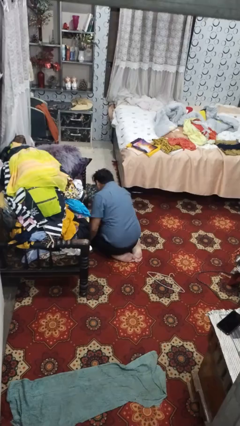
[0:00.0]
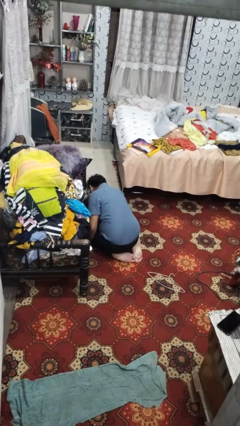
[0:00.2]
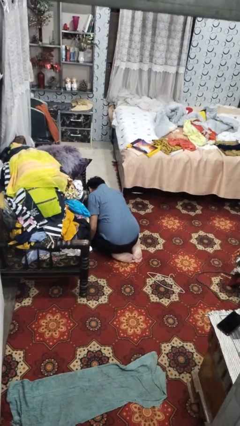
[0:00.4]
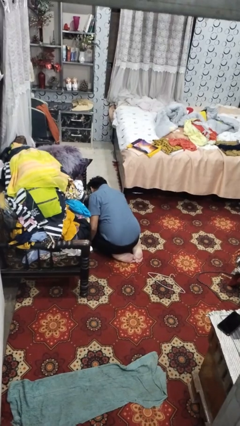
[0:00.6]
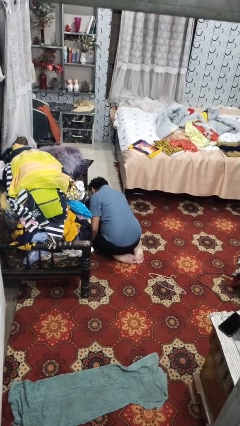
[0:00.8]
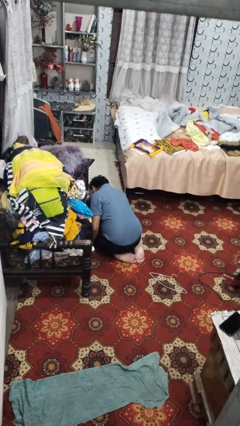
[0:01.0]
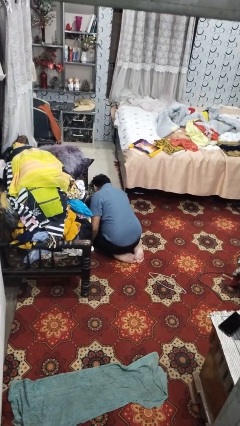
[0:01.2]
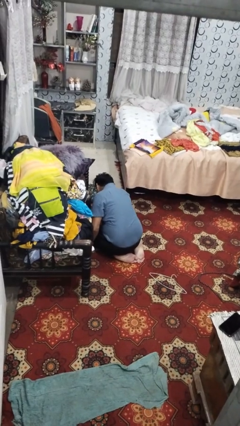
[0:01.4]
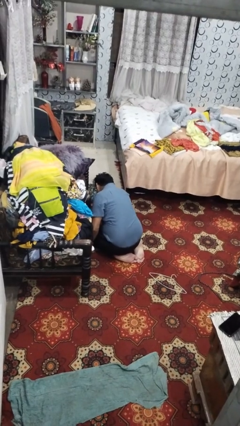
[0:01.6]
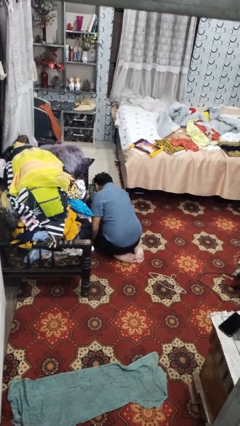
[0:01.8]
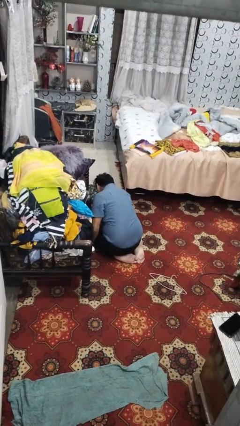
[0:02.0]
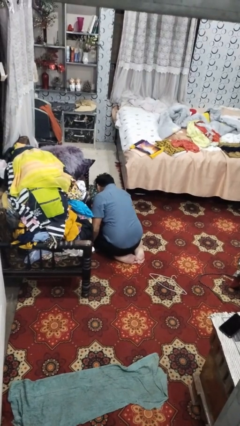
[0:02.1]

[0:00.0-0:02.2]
person searches under couch

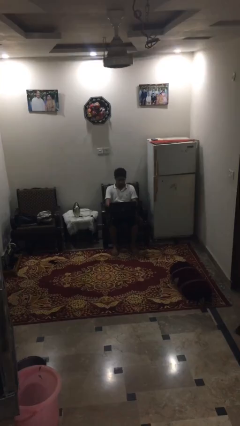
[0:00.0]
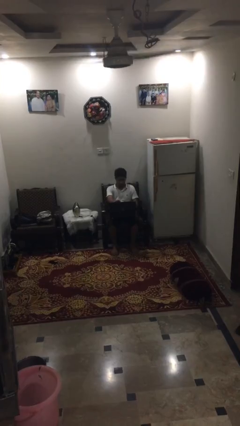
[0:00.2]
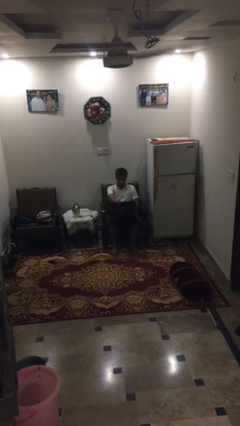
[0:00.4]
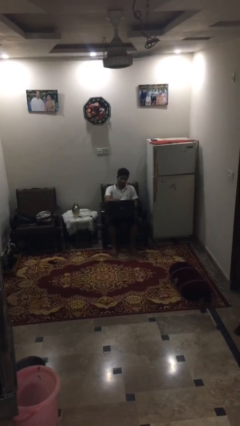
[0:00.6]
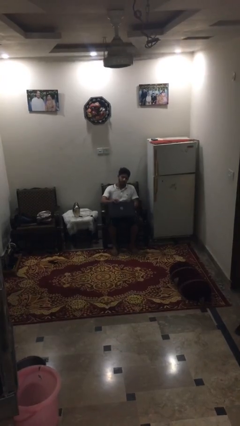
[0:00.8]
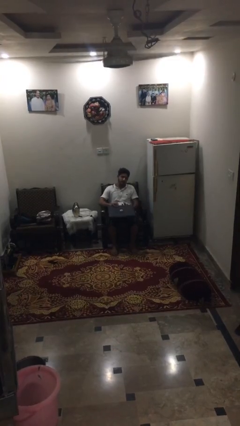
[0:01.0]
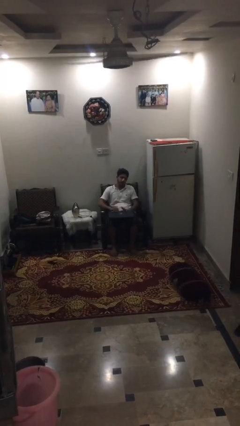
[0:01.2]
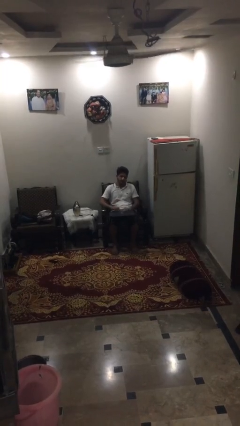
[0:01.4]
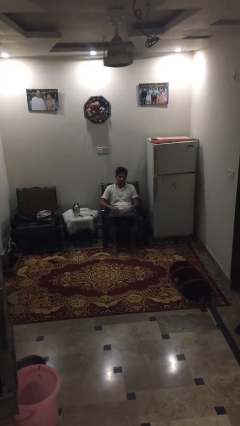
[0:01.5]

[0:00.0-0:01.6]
person closes laptop

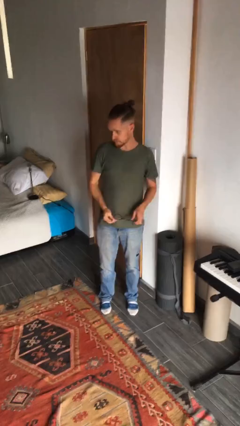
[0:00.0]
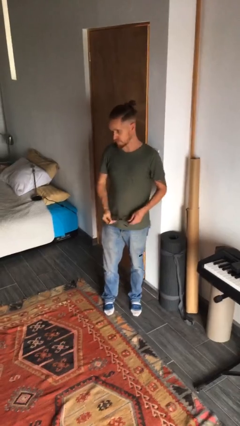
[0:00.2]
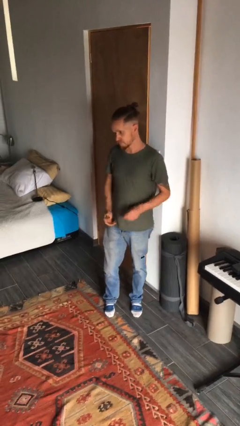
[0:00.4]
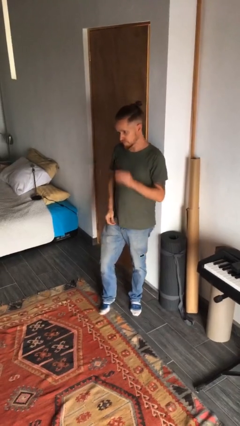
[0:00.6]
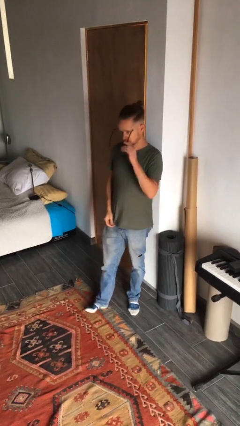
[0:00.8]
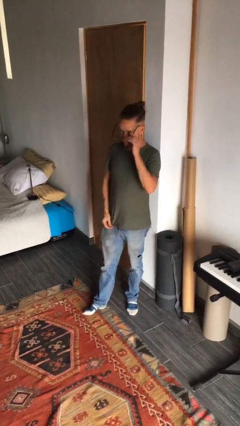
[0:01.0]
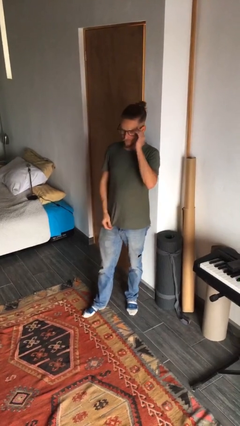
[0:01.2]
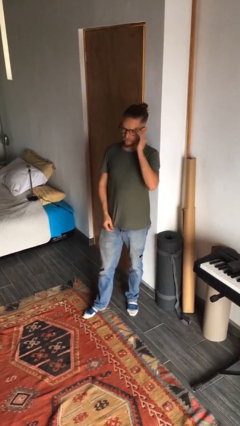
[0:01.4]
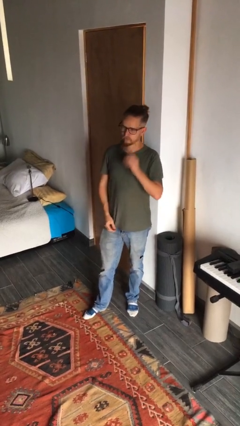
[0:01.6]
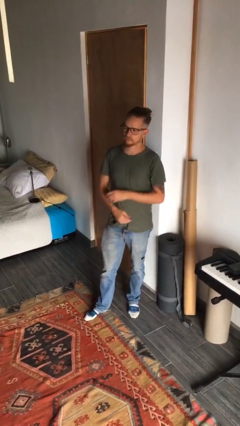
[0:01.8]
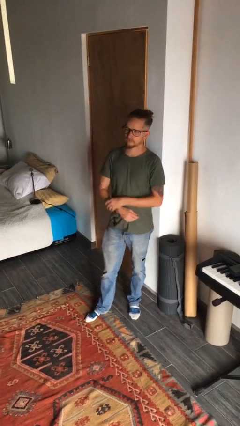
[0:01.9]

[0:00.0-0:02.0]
person puts on glasses

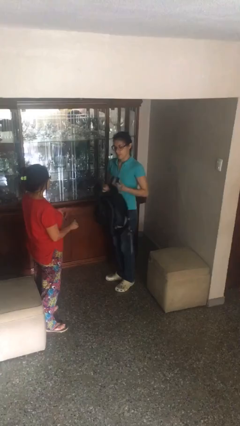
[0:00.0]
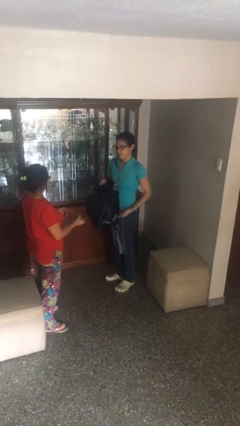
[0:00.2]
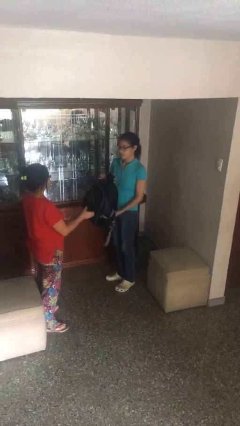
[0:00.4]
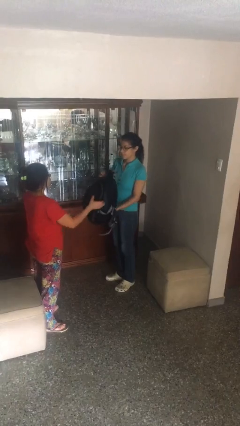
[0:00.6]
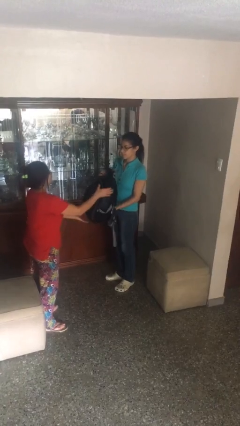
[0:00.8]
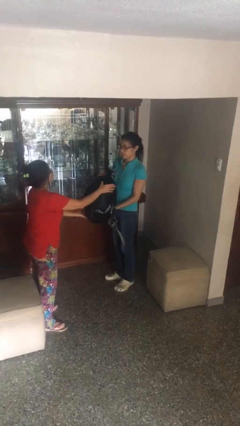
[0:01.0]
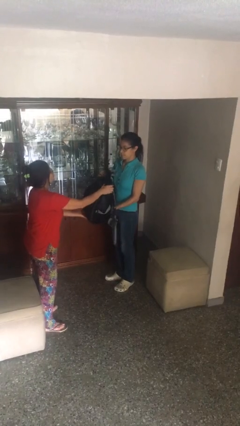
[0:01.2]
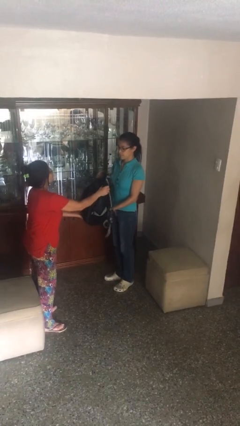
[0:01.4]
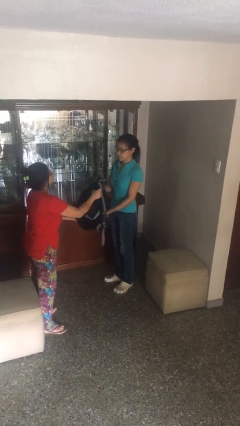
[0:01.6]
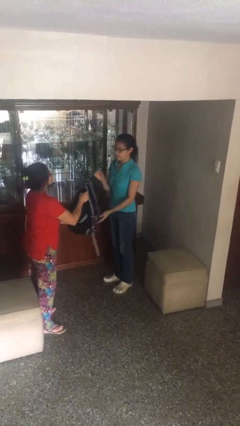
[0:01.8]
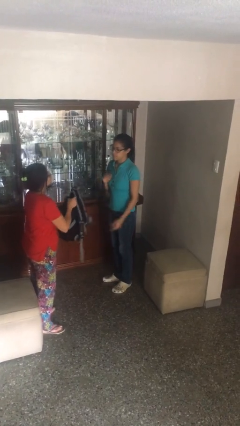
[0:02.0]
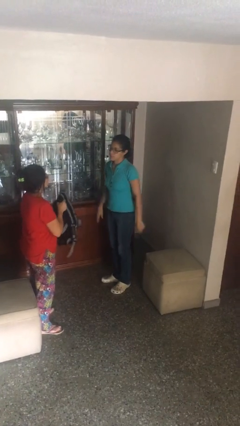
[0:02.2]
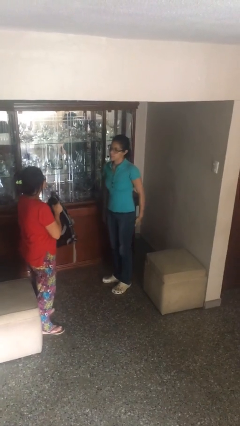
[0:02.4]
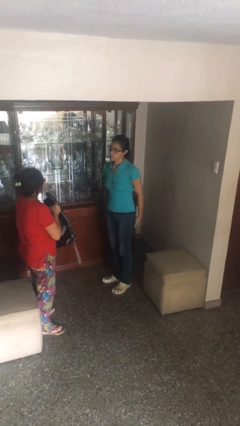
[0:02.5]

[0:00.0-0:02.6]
person transfers object to person

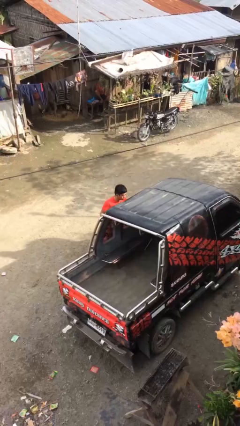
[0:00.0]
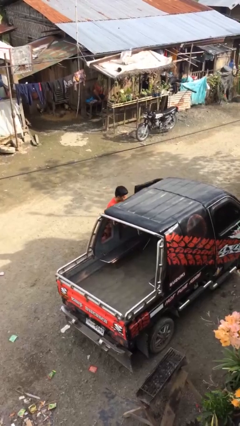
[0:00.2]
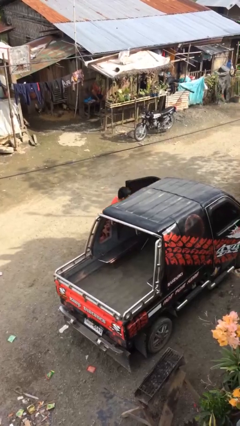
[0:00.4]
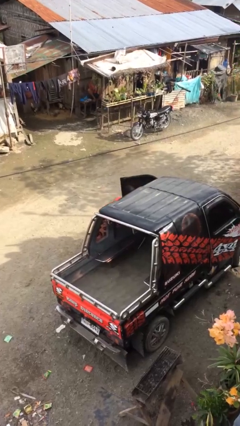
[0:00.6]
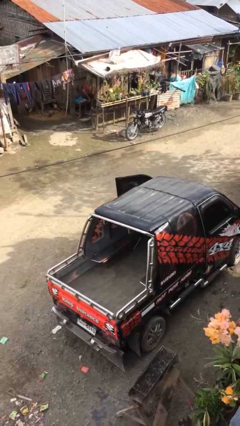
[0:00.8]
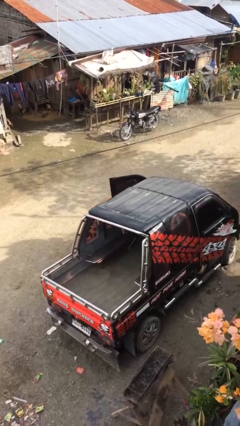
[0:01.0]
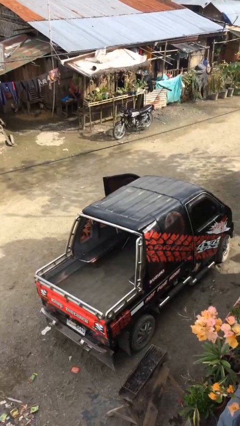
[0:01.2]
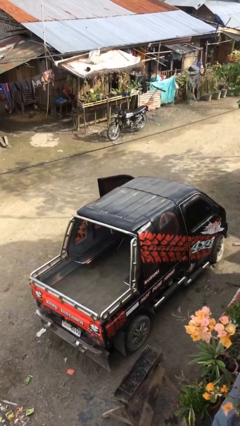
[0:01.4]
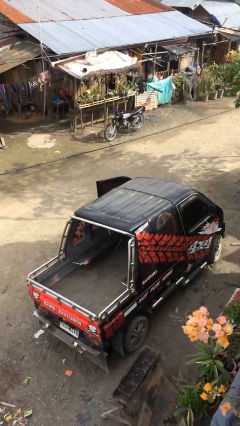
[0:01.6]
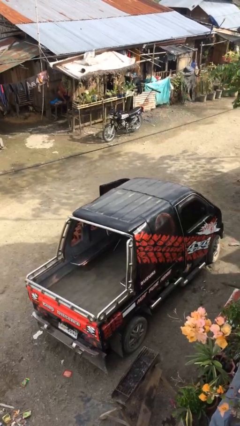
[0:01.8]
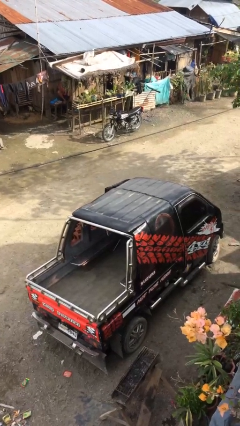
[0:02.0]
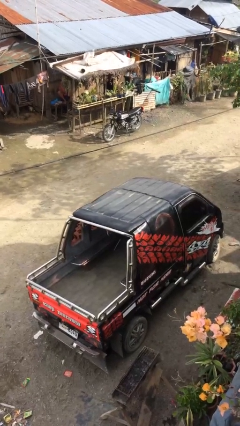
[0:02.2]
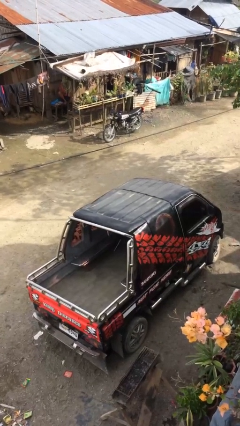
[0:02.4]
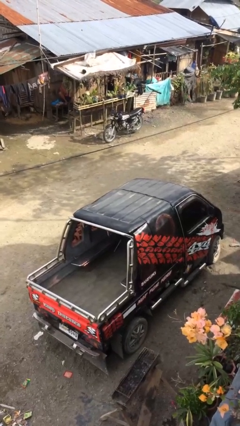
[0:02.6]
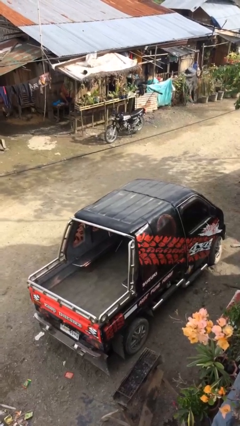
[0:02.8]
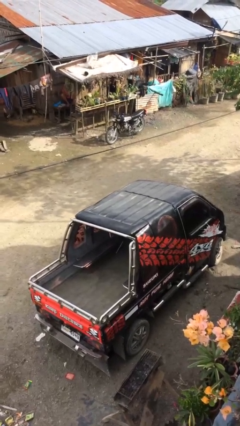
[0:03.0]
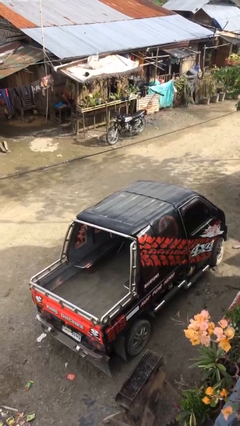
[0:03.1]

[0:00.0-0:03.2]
person enters car

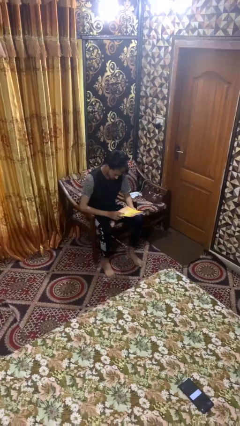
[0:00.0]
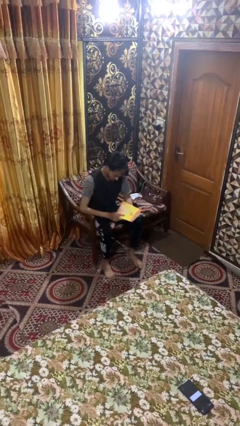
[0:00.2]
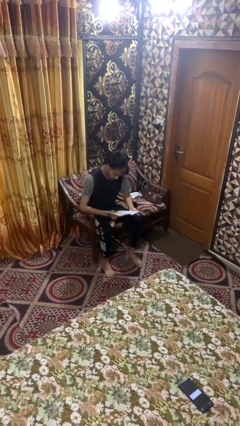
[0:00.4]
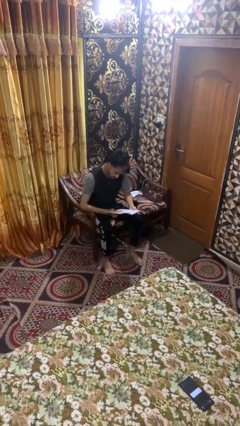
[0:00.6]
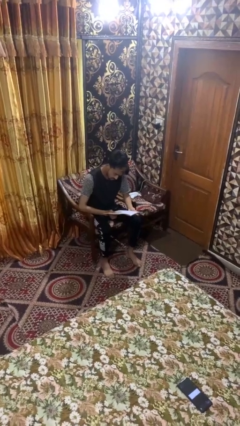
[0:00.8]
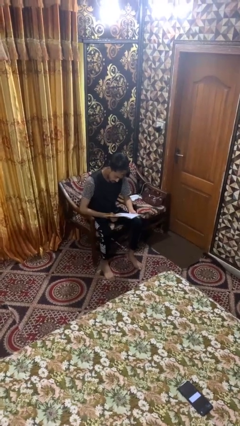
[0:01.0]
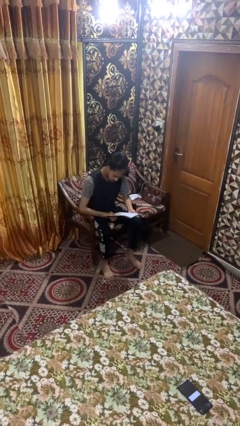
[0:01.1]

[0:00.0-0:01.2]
person reads magazine

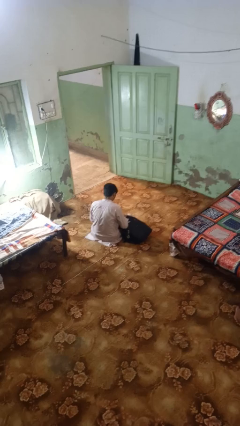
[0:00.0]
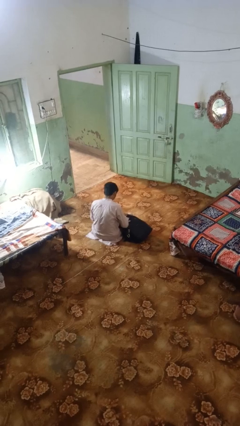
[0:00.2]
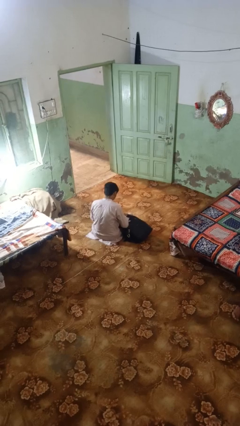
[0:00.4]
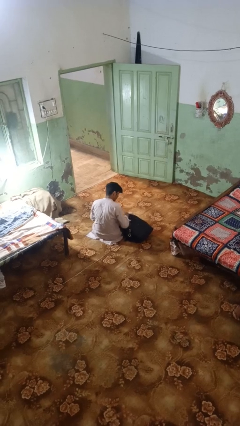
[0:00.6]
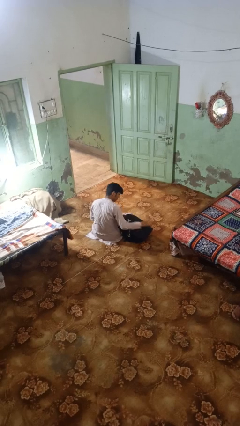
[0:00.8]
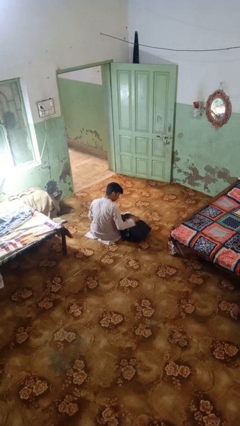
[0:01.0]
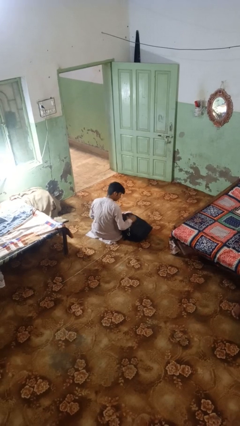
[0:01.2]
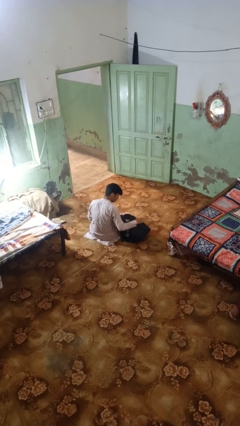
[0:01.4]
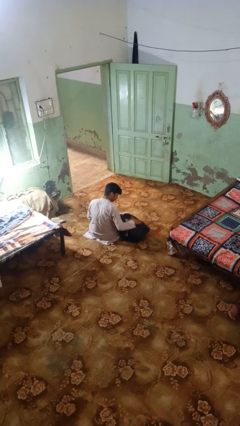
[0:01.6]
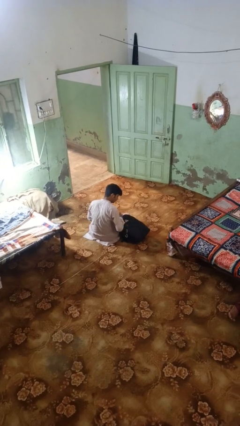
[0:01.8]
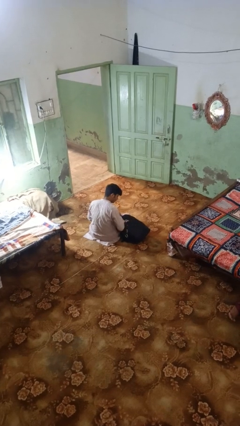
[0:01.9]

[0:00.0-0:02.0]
person waves hand over object

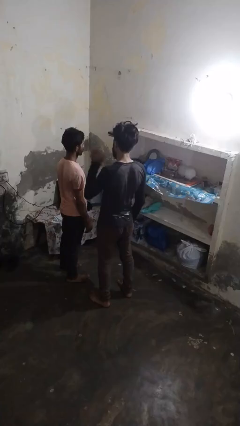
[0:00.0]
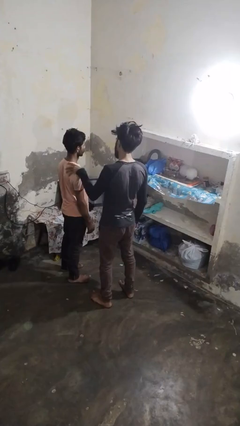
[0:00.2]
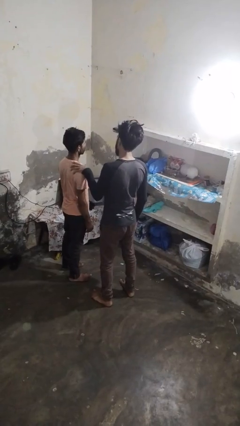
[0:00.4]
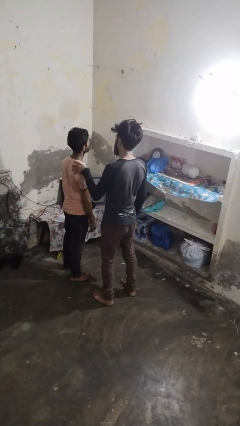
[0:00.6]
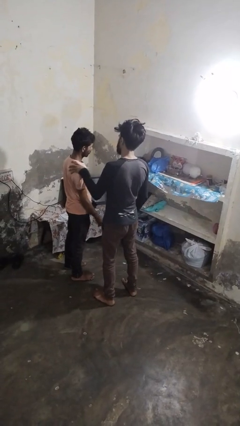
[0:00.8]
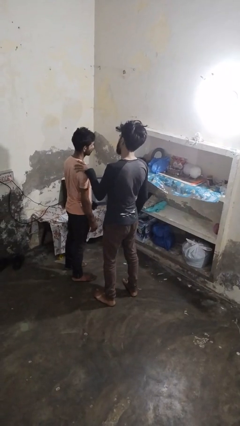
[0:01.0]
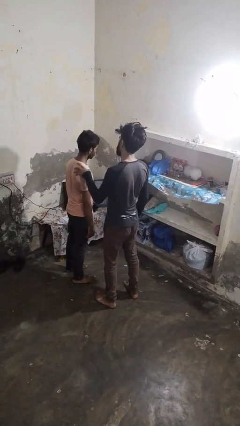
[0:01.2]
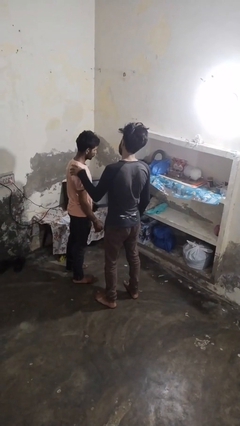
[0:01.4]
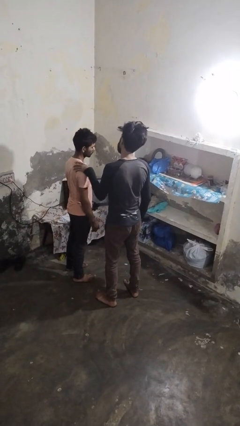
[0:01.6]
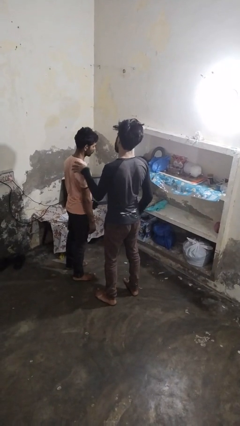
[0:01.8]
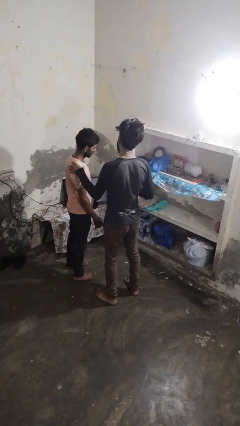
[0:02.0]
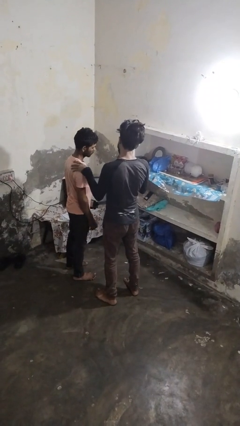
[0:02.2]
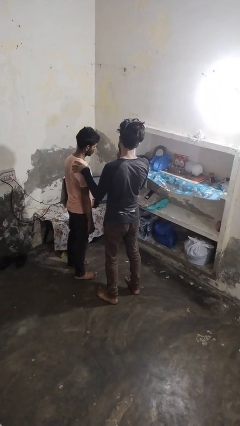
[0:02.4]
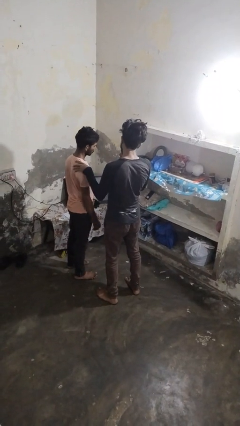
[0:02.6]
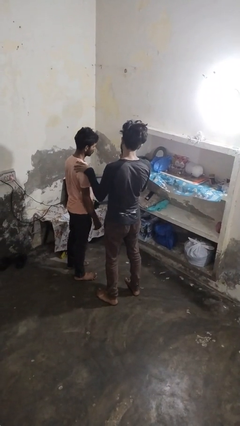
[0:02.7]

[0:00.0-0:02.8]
person grabs person by shoulder
